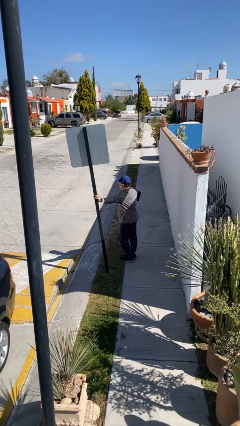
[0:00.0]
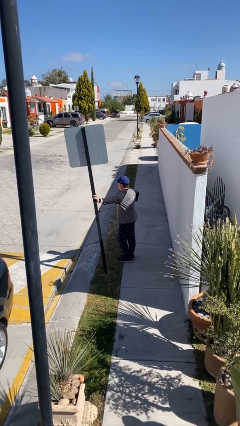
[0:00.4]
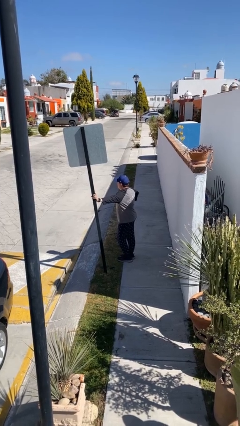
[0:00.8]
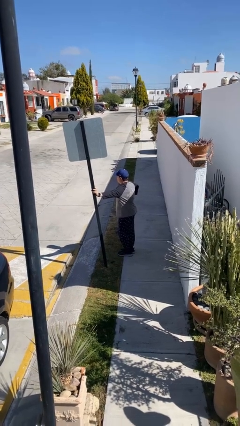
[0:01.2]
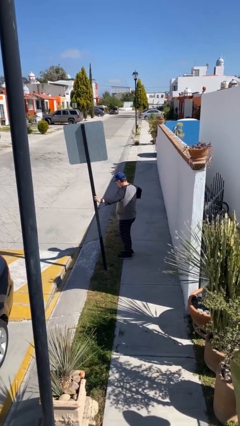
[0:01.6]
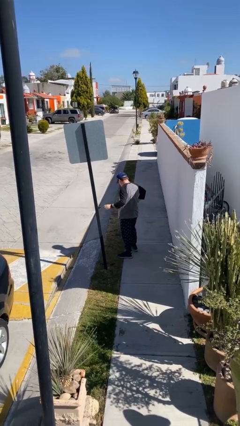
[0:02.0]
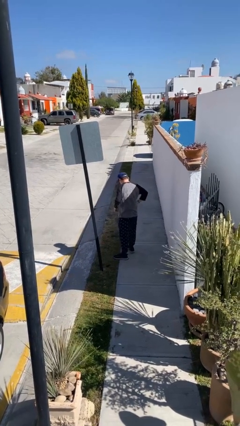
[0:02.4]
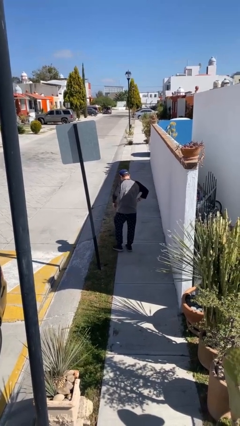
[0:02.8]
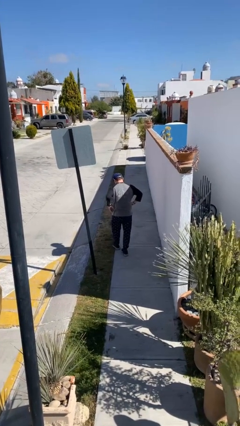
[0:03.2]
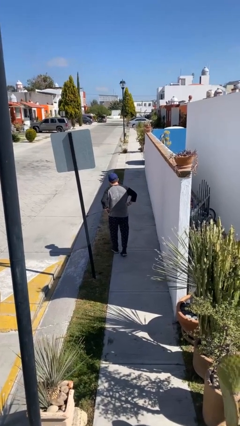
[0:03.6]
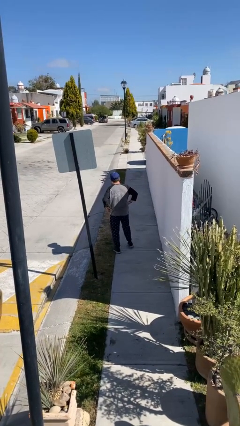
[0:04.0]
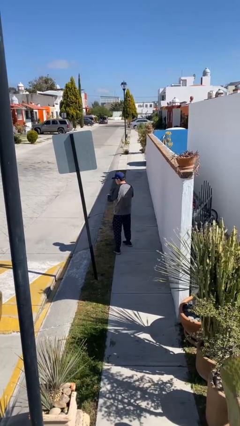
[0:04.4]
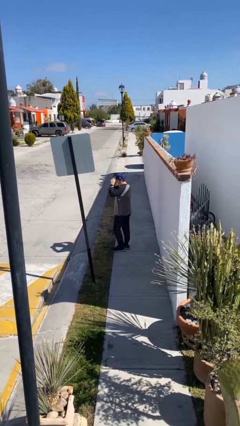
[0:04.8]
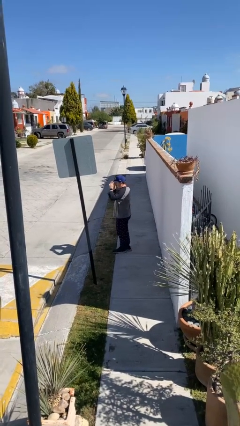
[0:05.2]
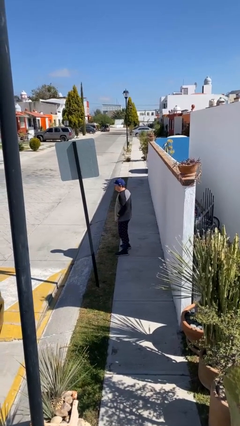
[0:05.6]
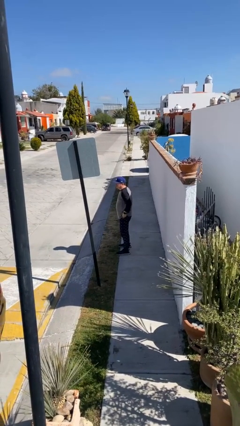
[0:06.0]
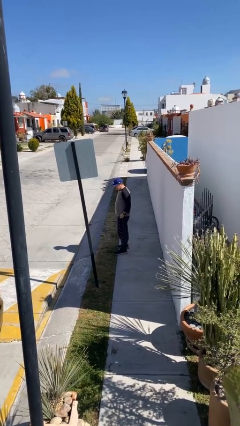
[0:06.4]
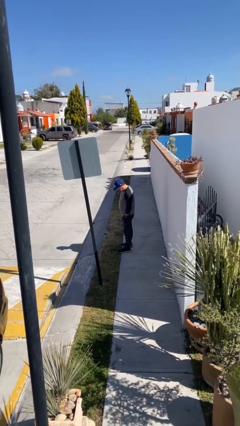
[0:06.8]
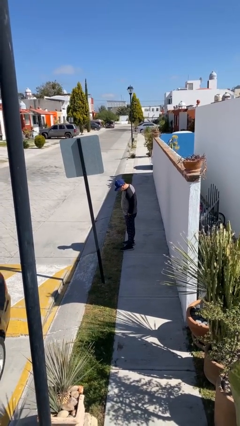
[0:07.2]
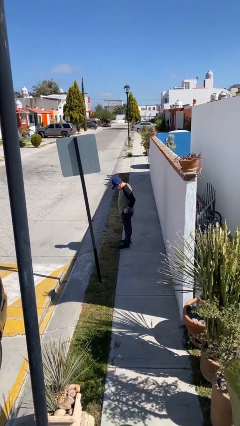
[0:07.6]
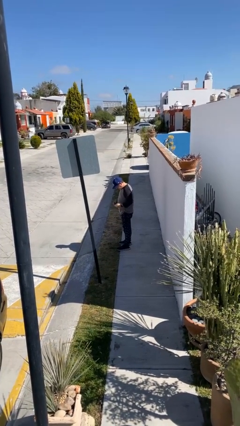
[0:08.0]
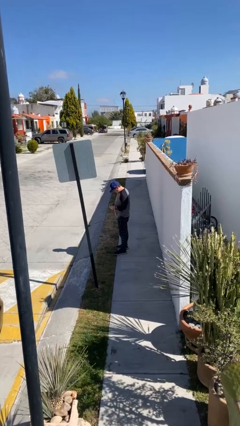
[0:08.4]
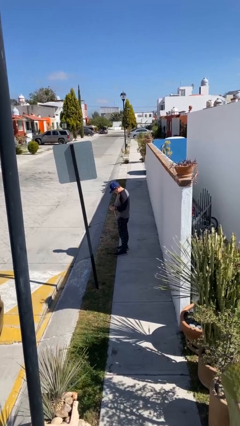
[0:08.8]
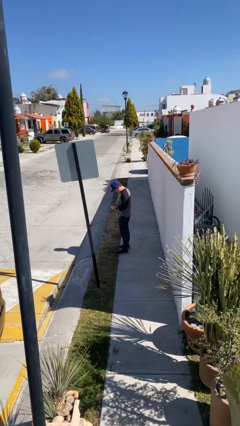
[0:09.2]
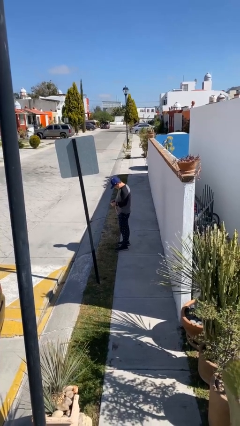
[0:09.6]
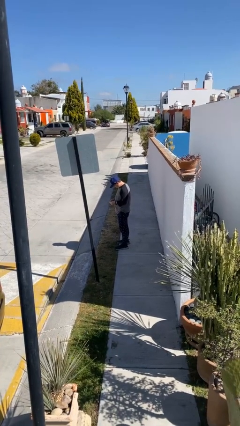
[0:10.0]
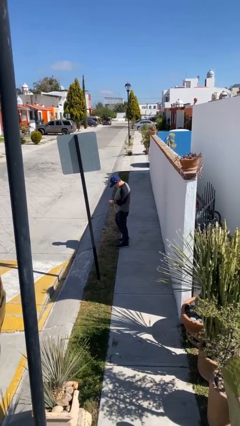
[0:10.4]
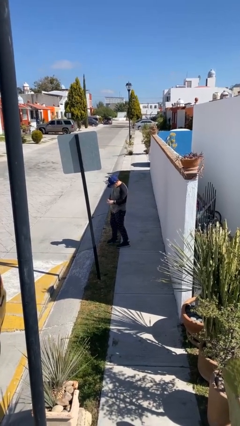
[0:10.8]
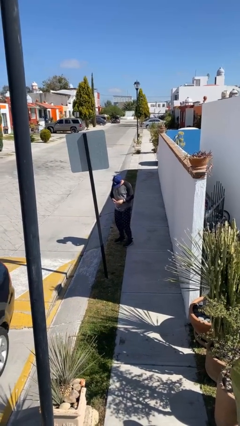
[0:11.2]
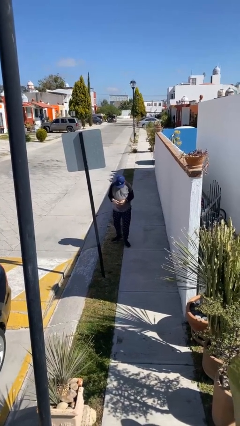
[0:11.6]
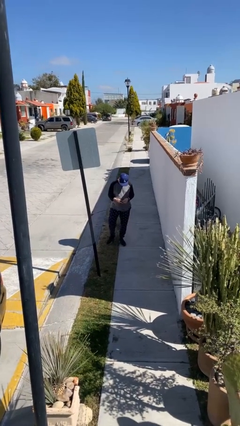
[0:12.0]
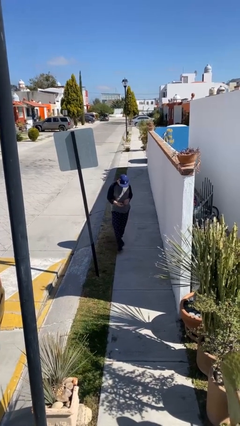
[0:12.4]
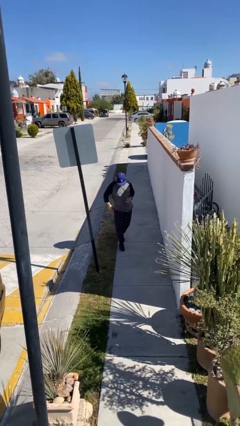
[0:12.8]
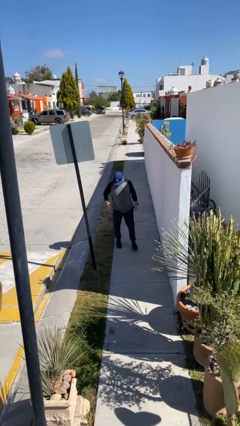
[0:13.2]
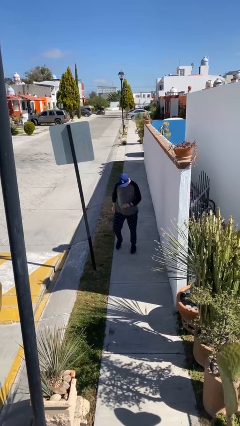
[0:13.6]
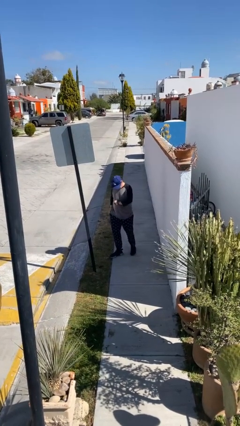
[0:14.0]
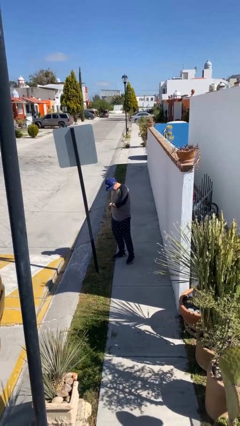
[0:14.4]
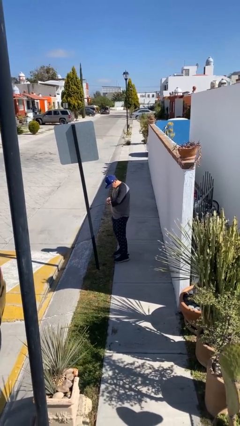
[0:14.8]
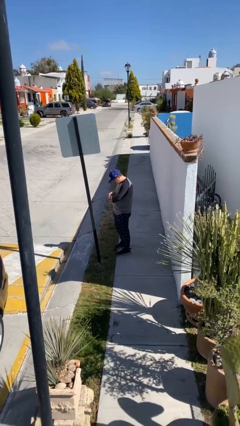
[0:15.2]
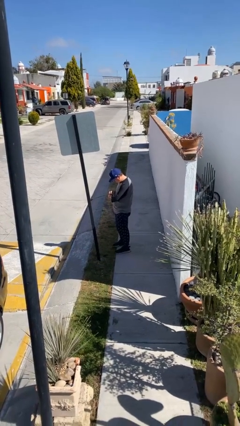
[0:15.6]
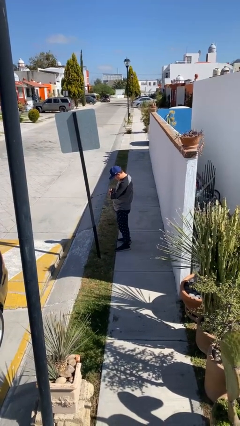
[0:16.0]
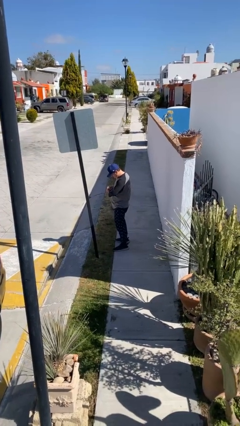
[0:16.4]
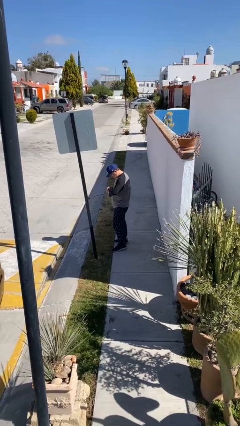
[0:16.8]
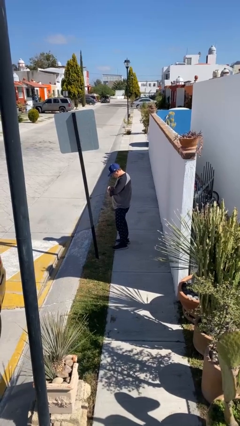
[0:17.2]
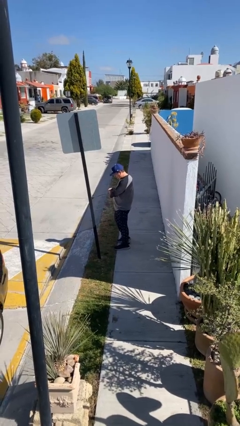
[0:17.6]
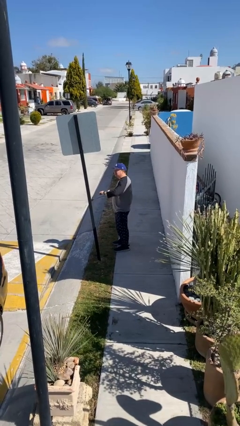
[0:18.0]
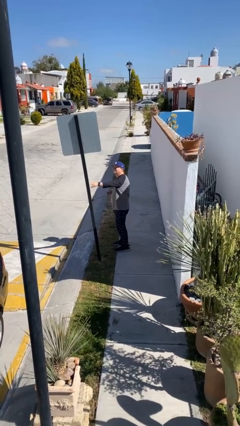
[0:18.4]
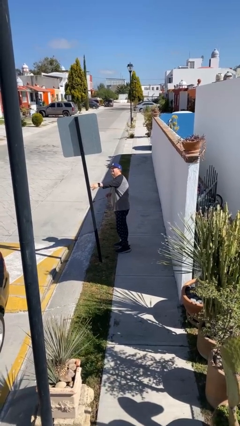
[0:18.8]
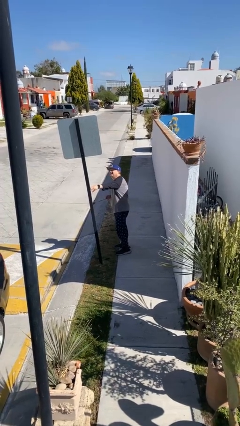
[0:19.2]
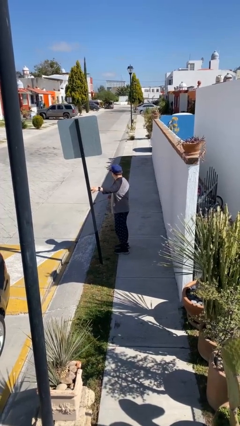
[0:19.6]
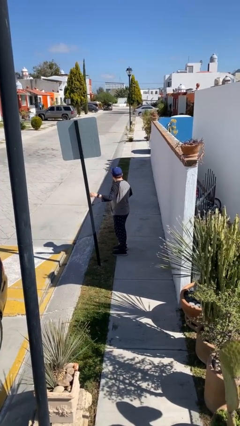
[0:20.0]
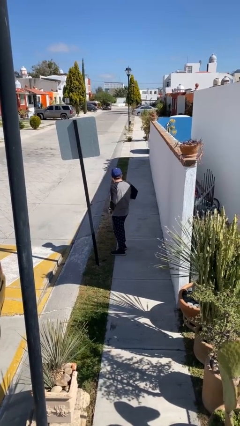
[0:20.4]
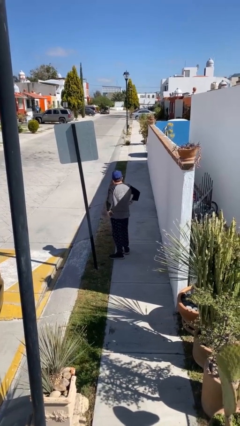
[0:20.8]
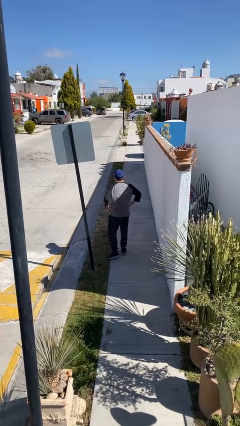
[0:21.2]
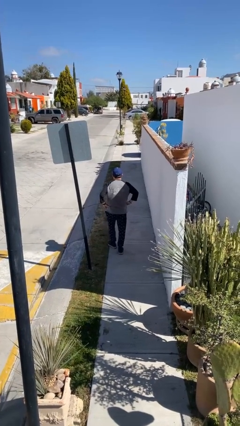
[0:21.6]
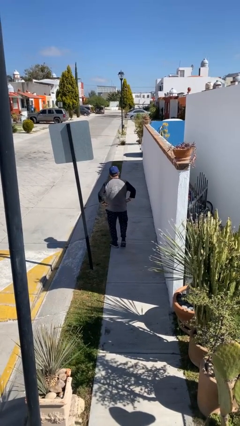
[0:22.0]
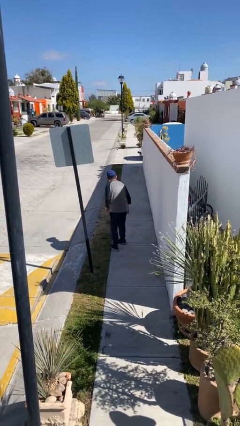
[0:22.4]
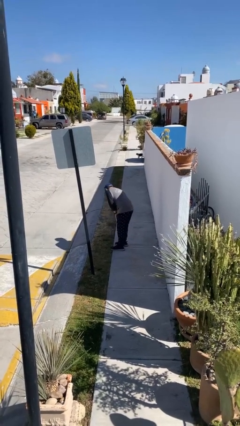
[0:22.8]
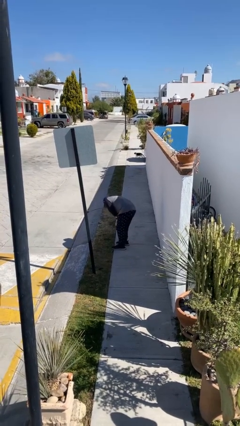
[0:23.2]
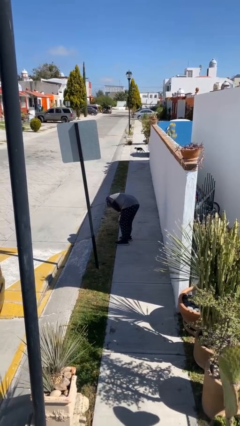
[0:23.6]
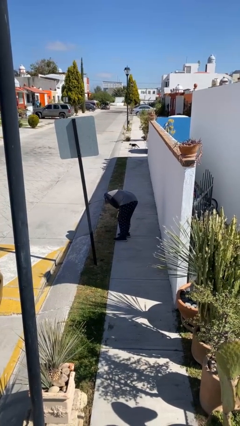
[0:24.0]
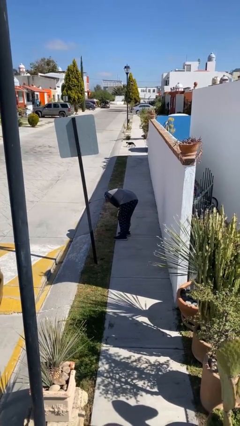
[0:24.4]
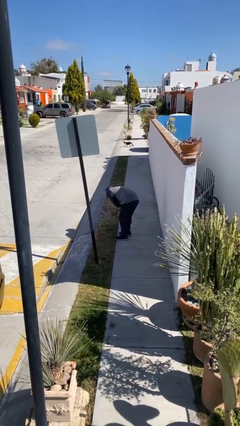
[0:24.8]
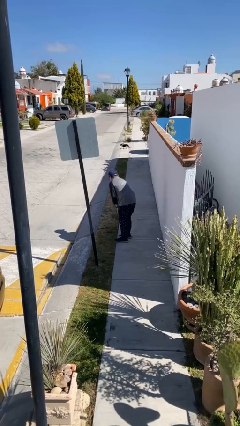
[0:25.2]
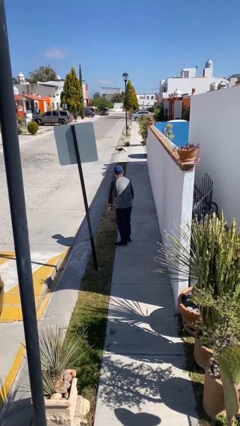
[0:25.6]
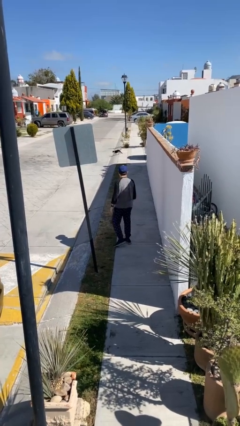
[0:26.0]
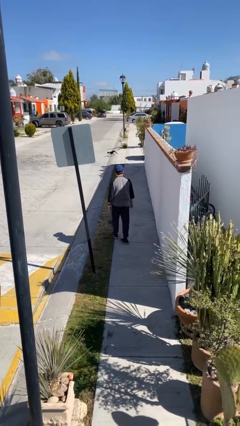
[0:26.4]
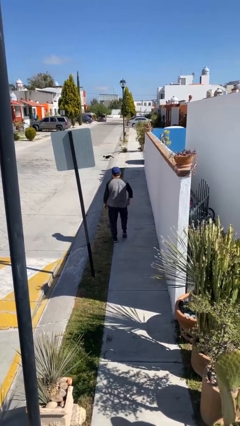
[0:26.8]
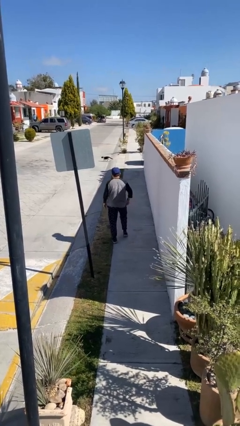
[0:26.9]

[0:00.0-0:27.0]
person walks

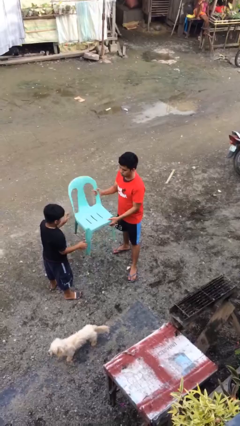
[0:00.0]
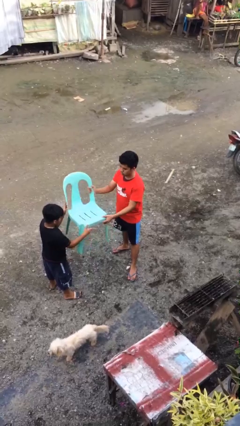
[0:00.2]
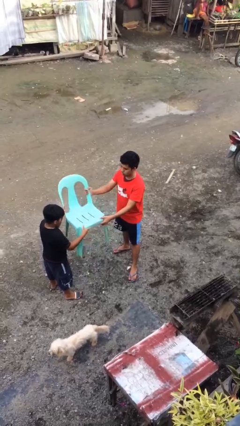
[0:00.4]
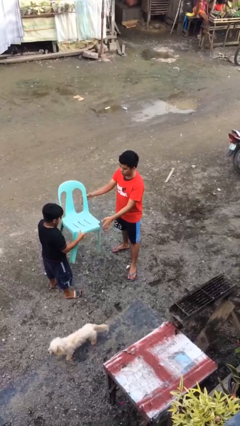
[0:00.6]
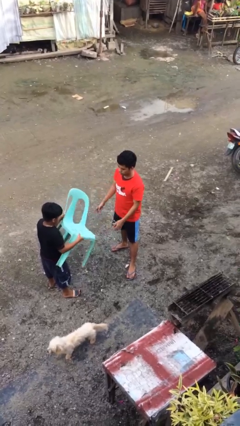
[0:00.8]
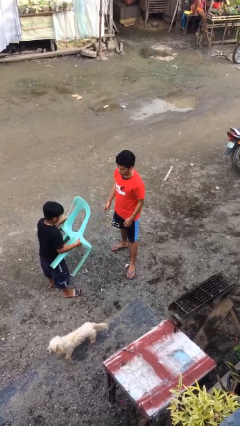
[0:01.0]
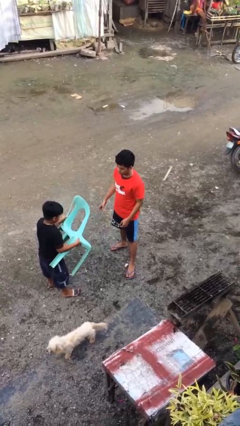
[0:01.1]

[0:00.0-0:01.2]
person transfers object to person

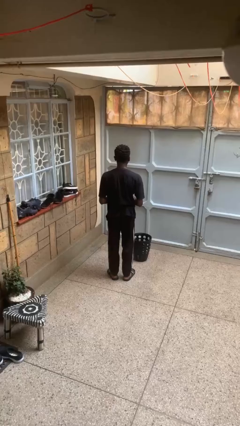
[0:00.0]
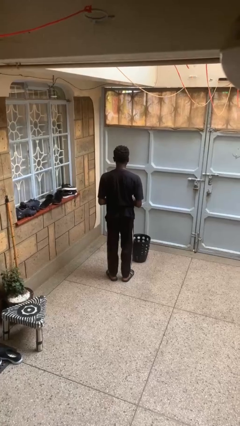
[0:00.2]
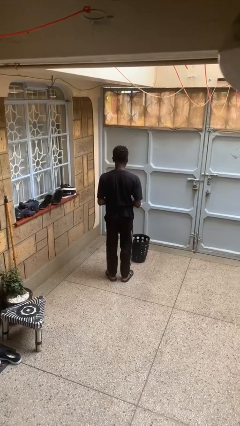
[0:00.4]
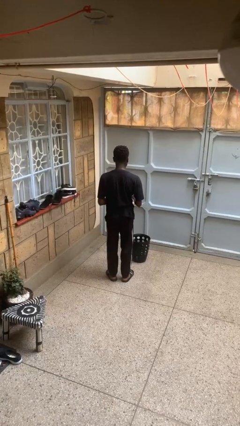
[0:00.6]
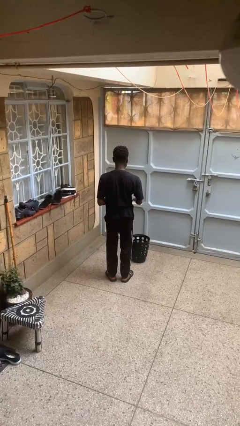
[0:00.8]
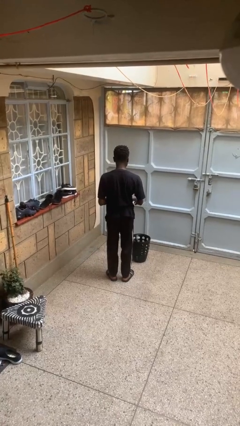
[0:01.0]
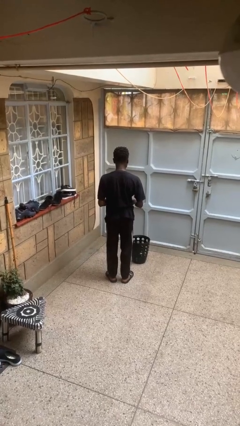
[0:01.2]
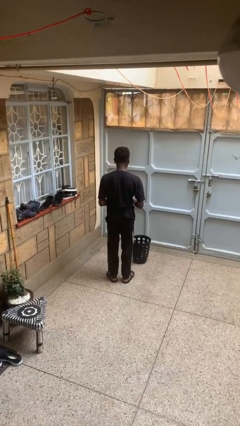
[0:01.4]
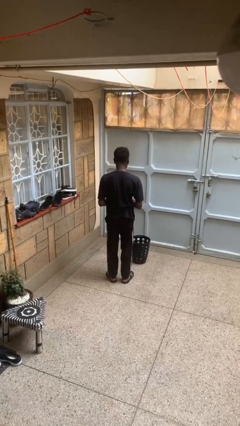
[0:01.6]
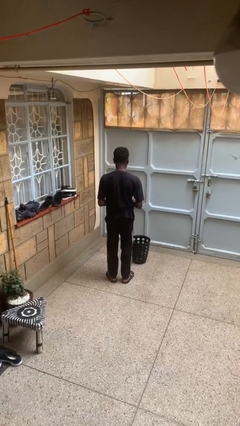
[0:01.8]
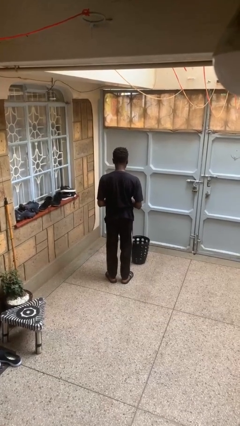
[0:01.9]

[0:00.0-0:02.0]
person discards trash

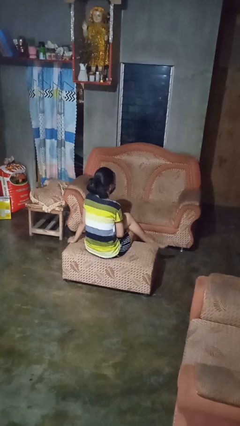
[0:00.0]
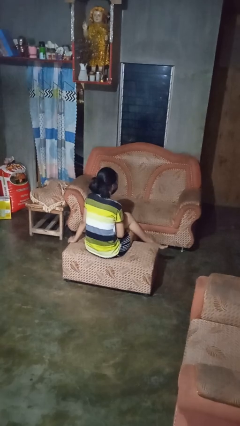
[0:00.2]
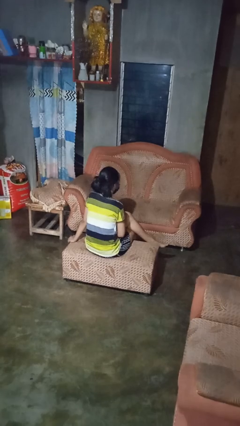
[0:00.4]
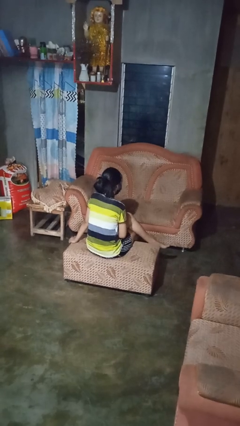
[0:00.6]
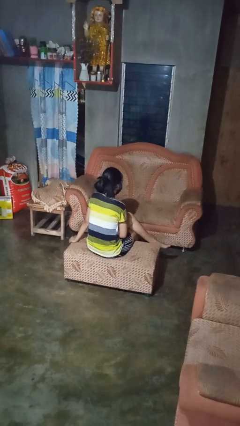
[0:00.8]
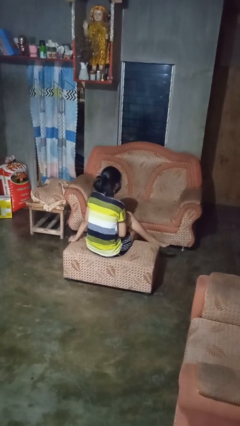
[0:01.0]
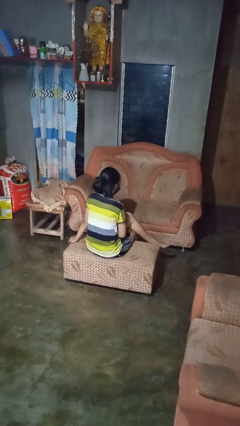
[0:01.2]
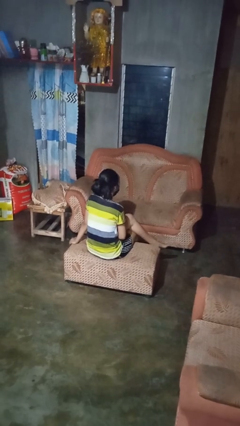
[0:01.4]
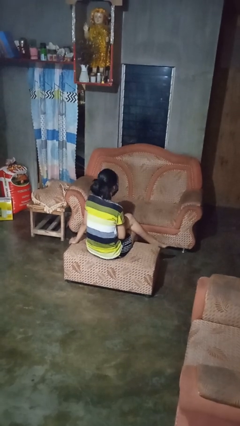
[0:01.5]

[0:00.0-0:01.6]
person crosses legs
